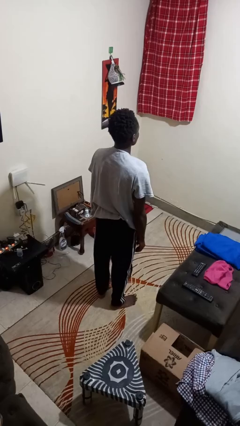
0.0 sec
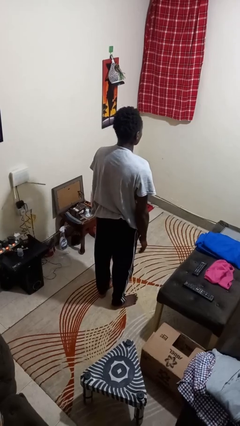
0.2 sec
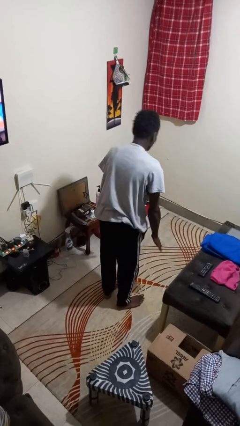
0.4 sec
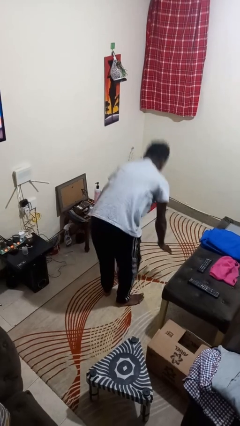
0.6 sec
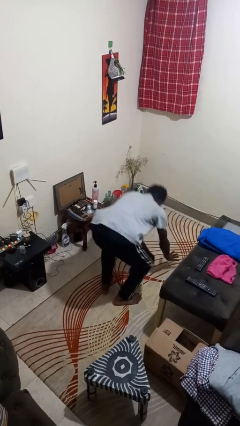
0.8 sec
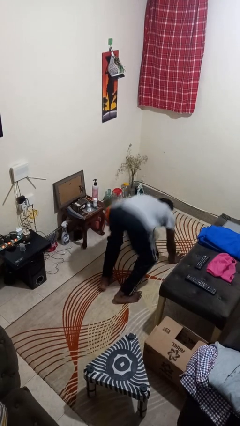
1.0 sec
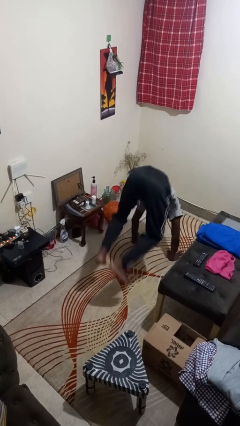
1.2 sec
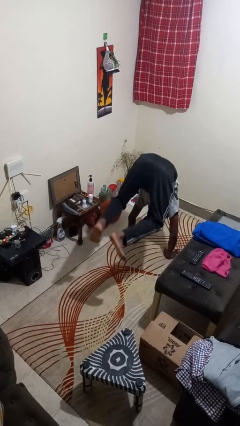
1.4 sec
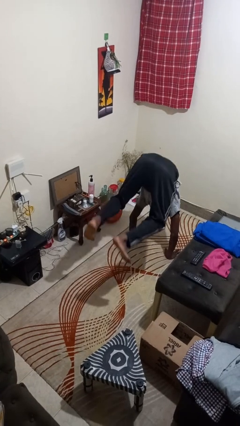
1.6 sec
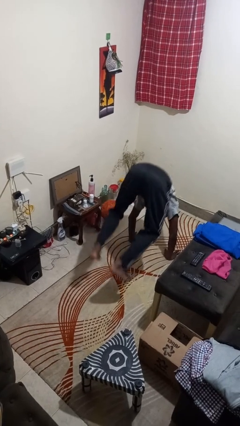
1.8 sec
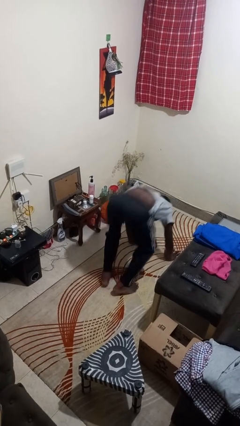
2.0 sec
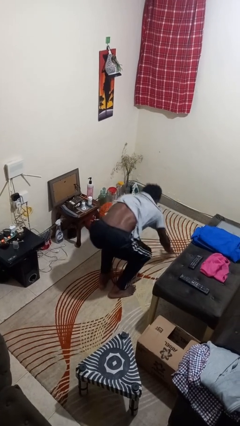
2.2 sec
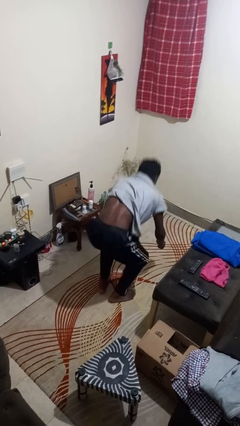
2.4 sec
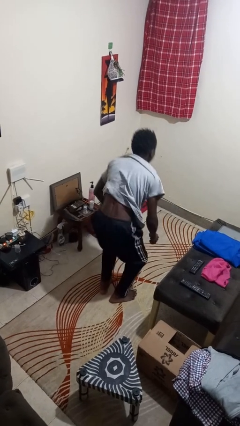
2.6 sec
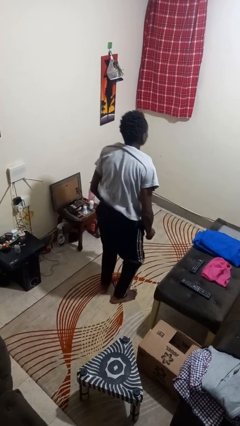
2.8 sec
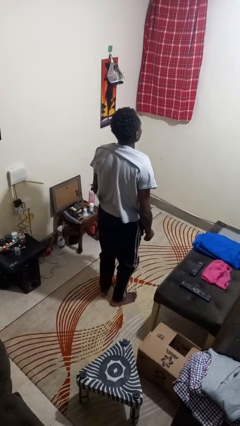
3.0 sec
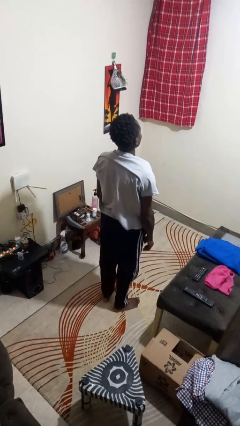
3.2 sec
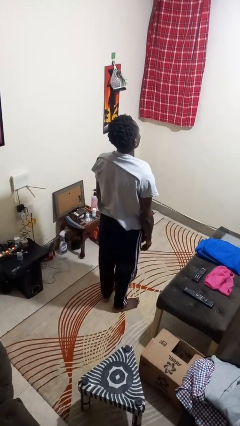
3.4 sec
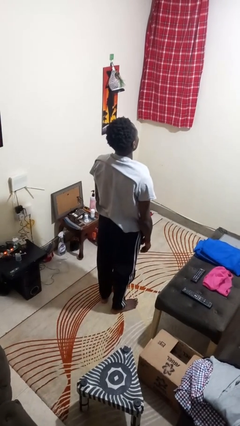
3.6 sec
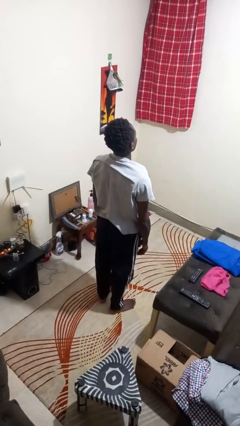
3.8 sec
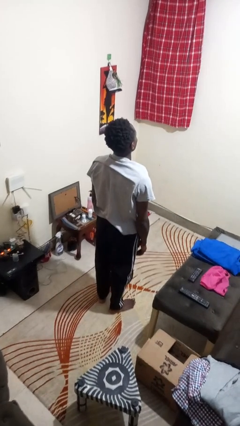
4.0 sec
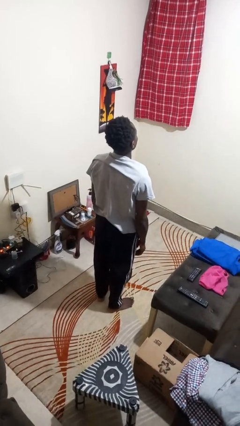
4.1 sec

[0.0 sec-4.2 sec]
person handstand

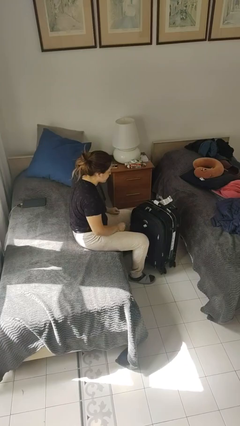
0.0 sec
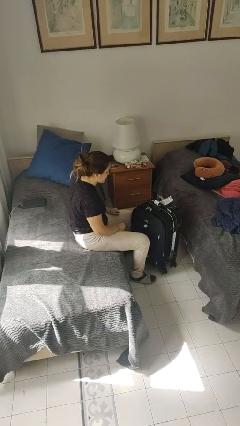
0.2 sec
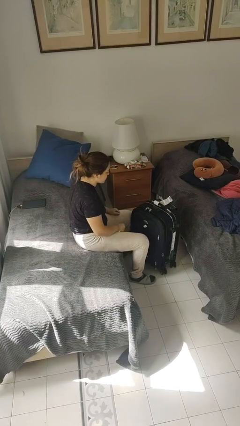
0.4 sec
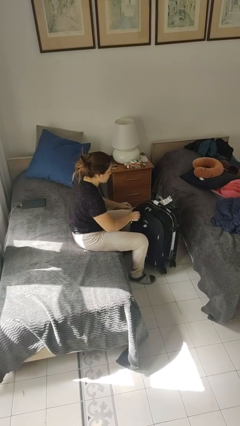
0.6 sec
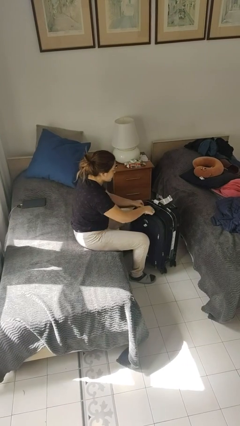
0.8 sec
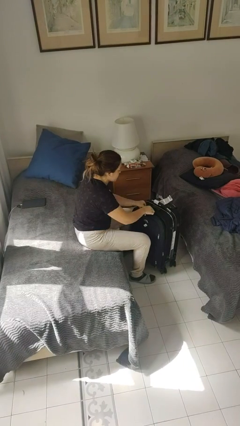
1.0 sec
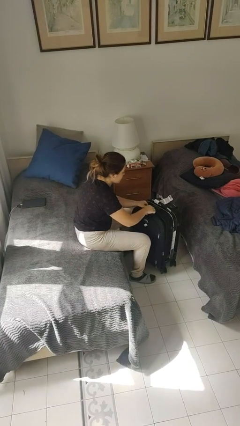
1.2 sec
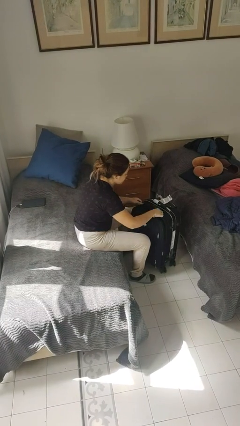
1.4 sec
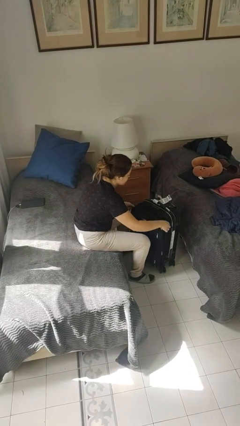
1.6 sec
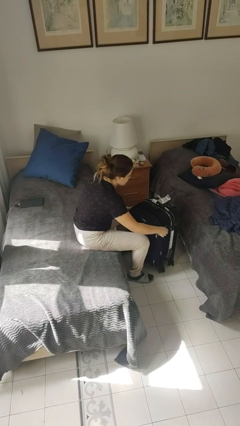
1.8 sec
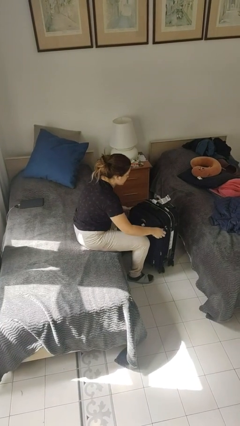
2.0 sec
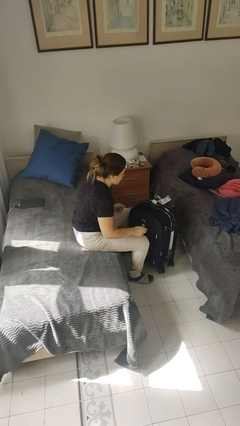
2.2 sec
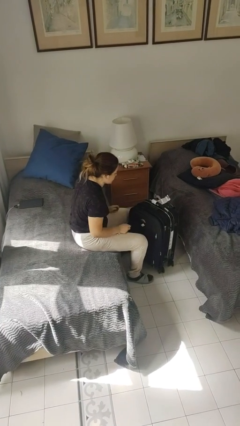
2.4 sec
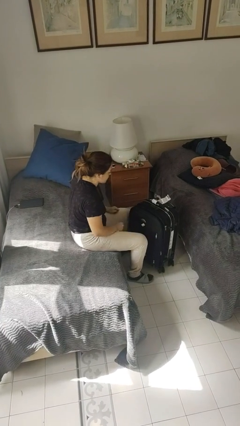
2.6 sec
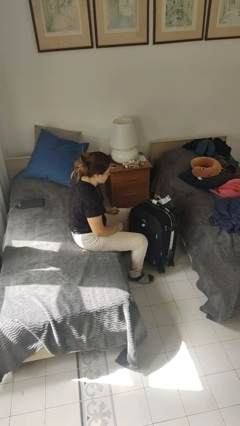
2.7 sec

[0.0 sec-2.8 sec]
person opens suitcase

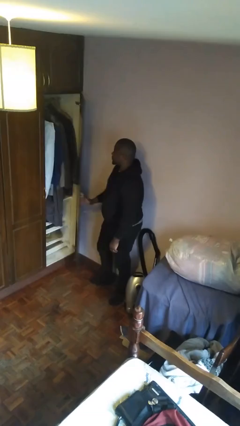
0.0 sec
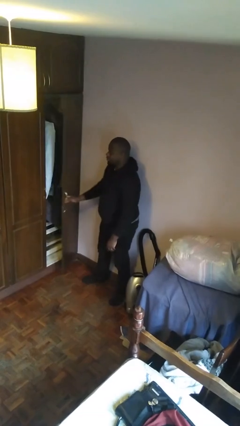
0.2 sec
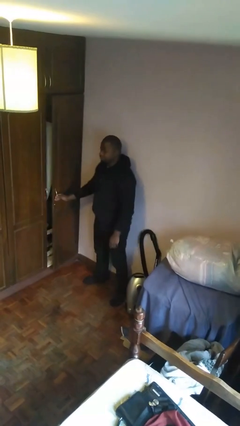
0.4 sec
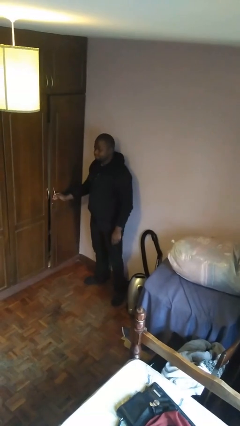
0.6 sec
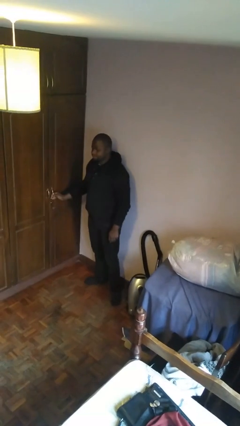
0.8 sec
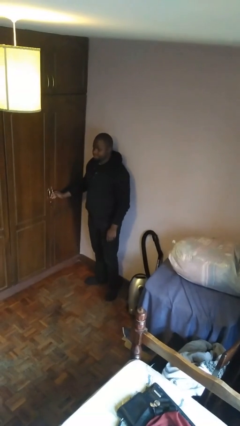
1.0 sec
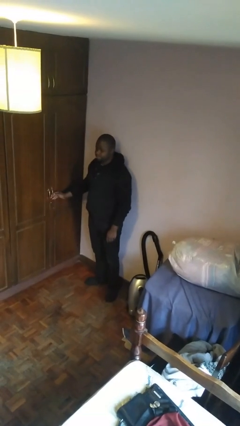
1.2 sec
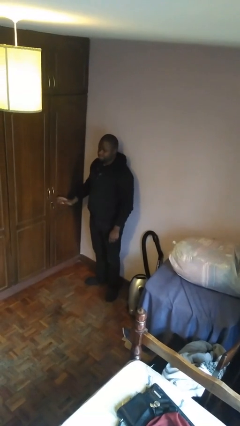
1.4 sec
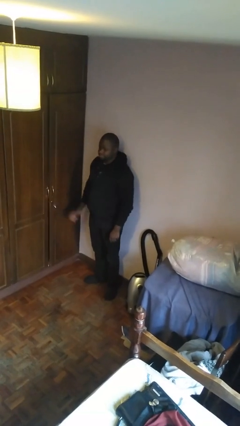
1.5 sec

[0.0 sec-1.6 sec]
person closes closet door

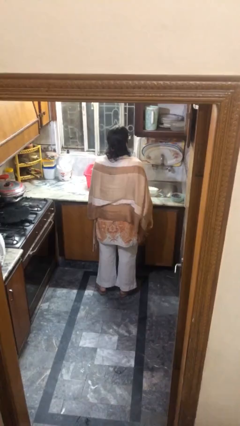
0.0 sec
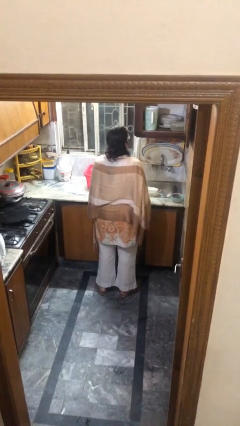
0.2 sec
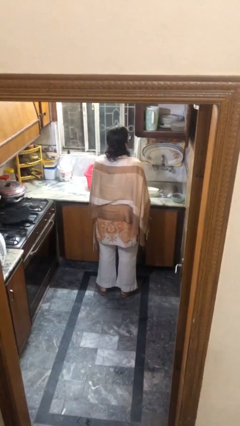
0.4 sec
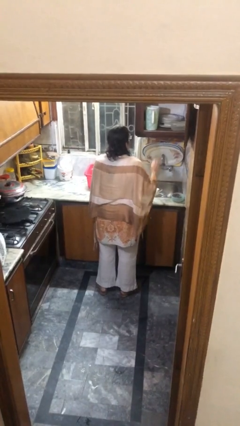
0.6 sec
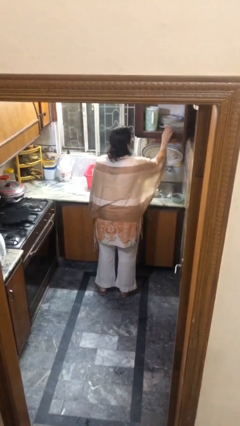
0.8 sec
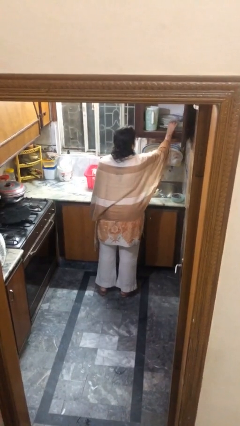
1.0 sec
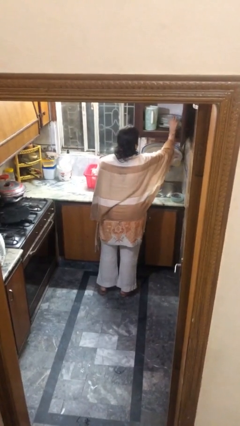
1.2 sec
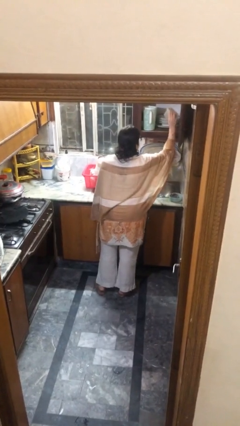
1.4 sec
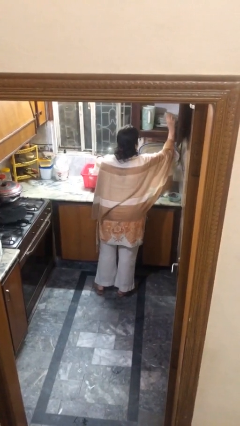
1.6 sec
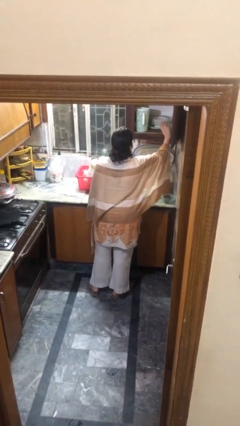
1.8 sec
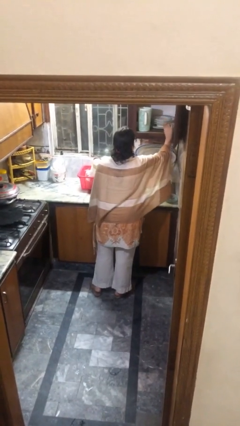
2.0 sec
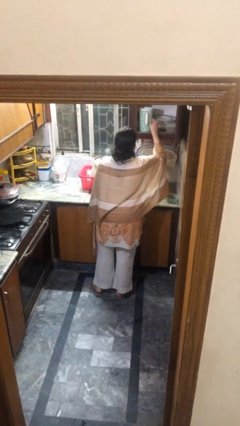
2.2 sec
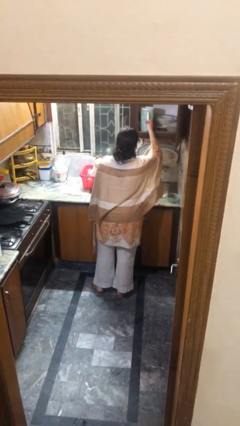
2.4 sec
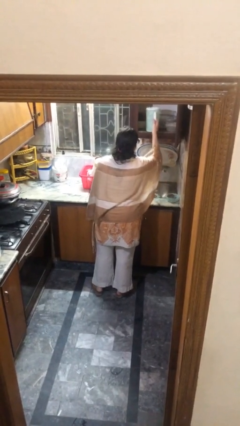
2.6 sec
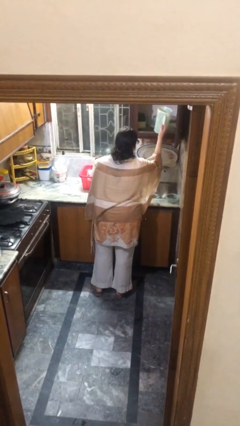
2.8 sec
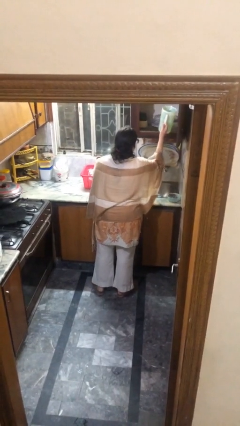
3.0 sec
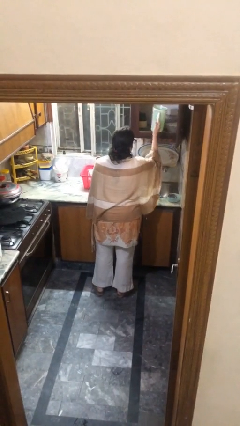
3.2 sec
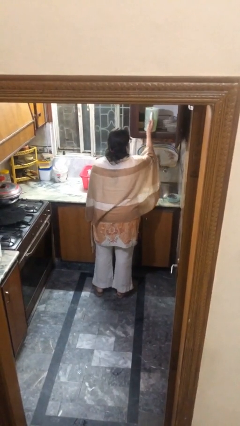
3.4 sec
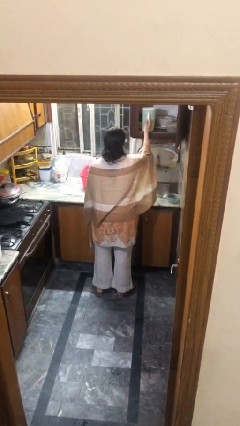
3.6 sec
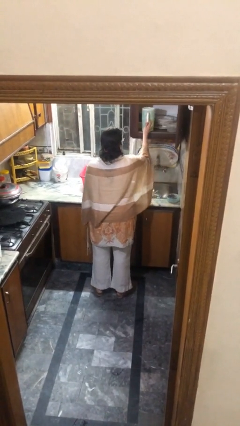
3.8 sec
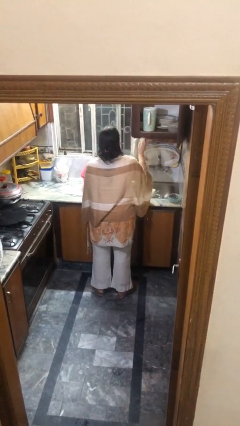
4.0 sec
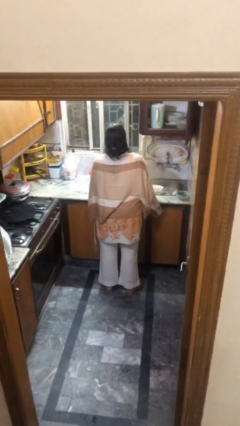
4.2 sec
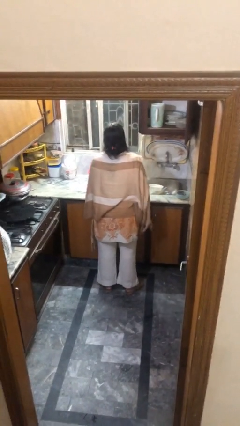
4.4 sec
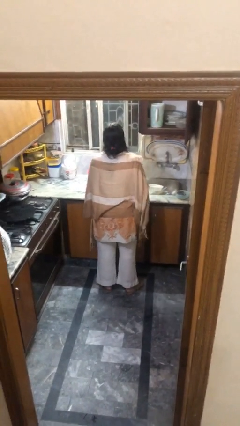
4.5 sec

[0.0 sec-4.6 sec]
person searches in kitchen drawer

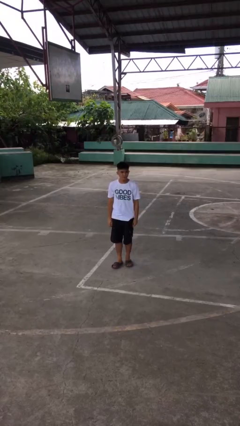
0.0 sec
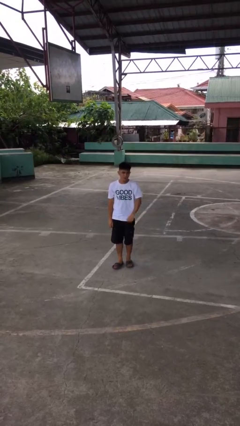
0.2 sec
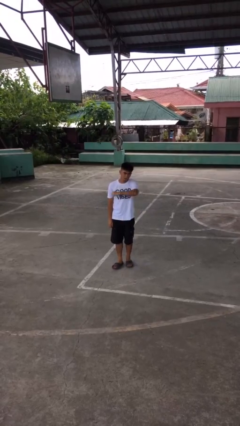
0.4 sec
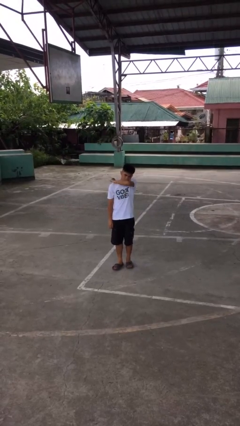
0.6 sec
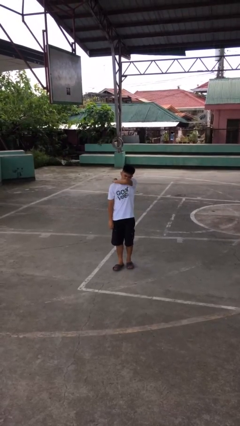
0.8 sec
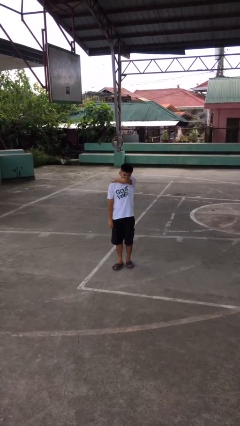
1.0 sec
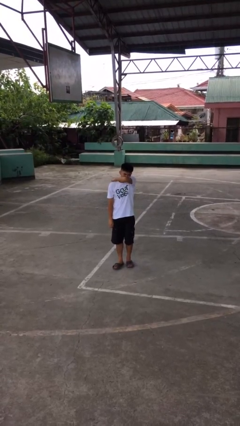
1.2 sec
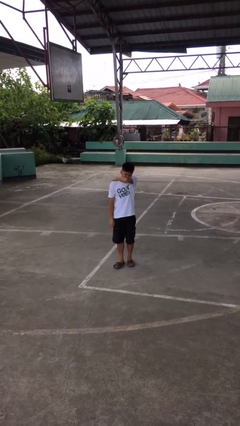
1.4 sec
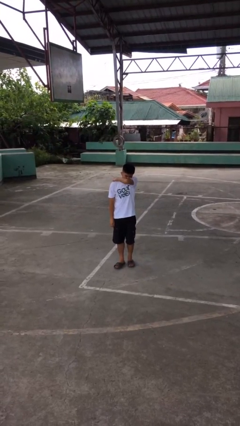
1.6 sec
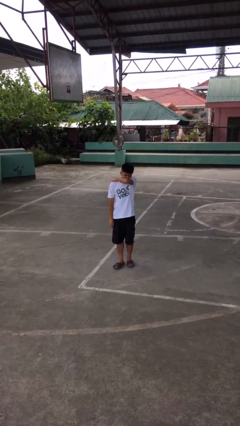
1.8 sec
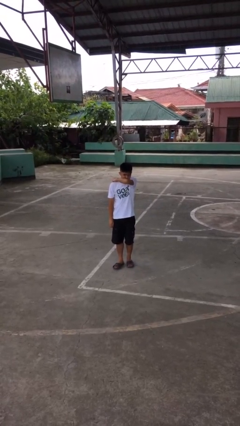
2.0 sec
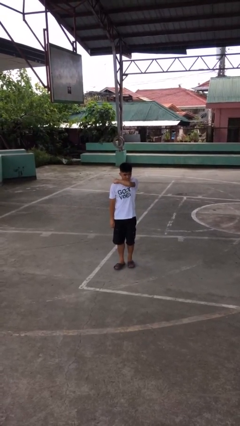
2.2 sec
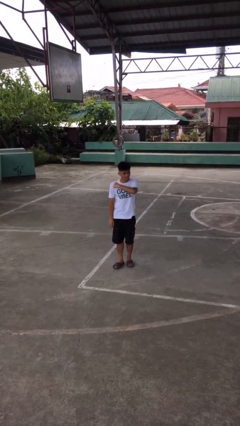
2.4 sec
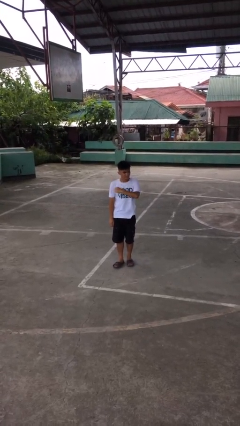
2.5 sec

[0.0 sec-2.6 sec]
person sneezes into arm

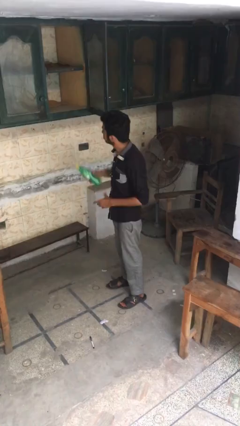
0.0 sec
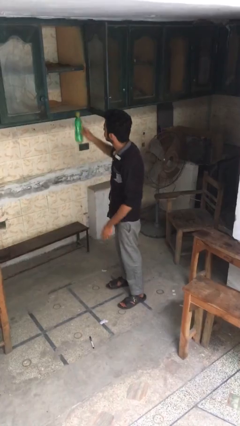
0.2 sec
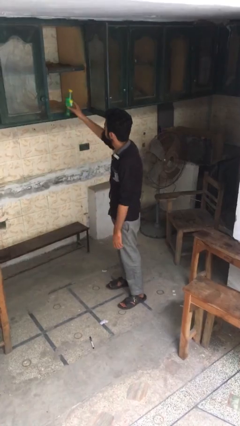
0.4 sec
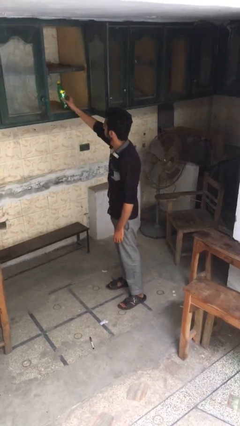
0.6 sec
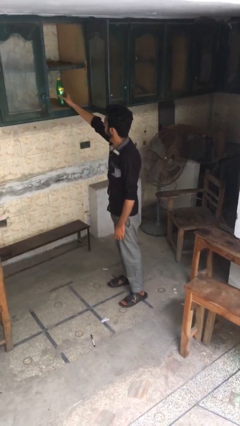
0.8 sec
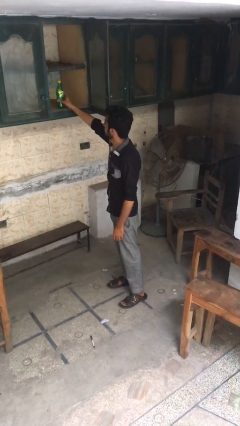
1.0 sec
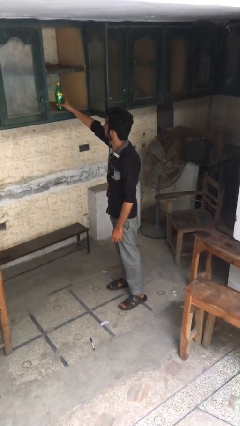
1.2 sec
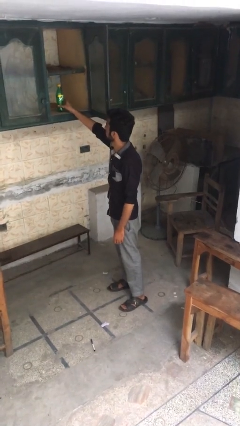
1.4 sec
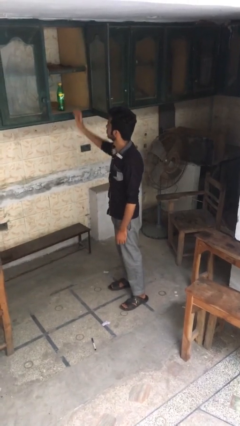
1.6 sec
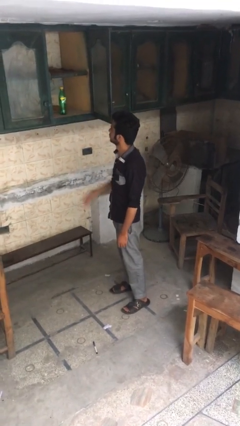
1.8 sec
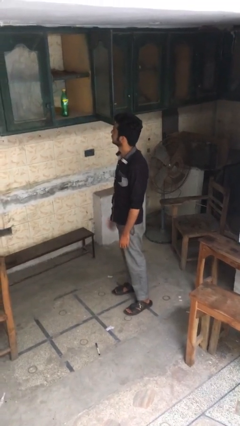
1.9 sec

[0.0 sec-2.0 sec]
person puts object in cabinet
